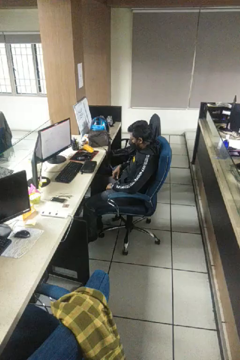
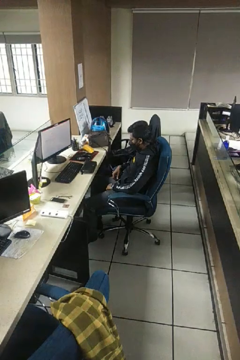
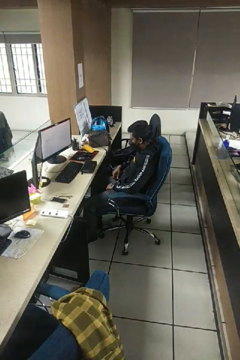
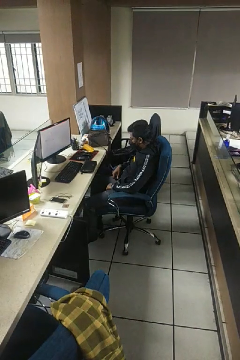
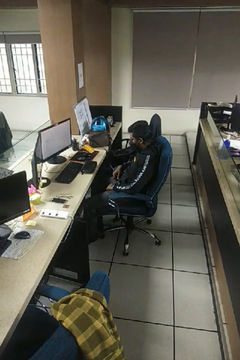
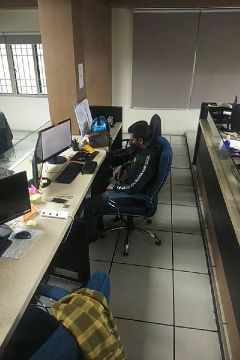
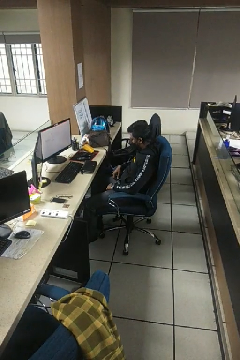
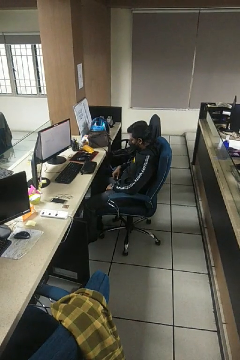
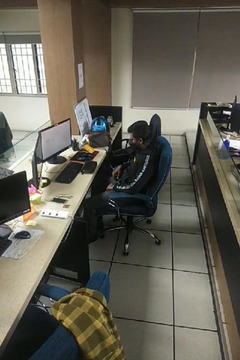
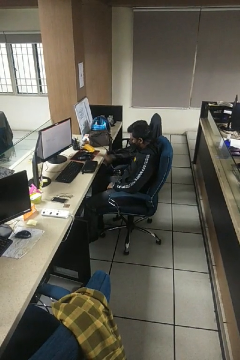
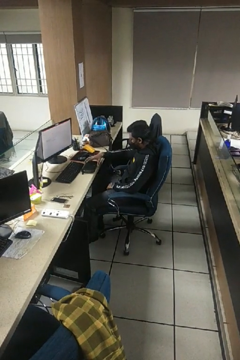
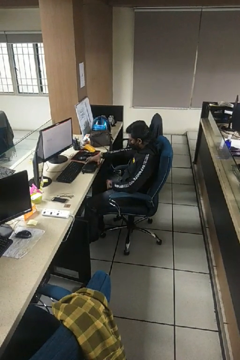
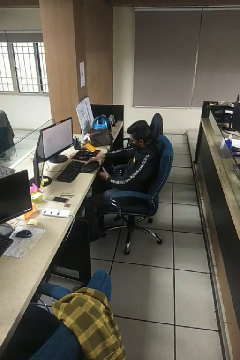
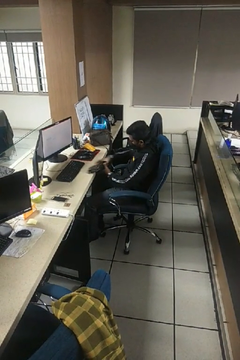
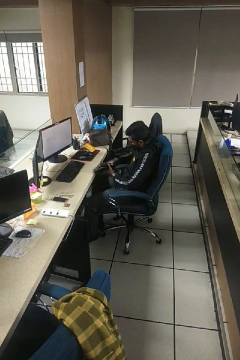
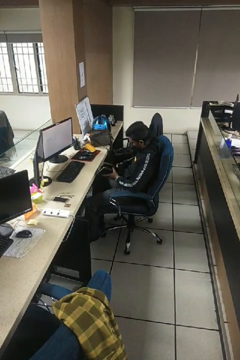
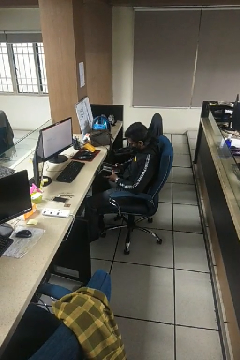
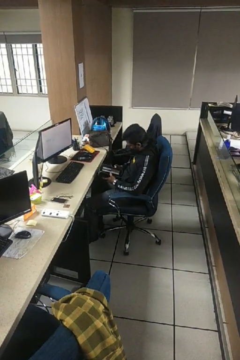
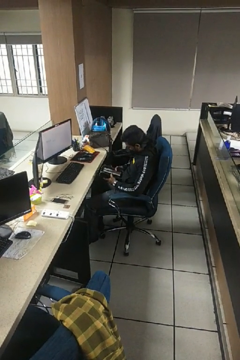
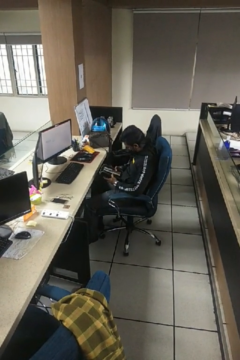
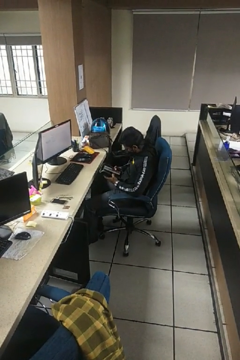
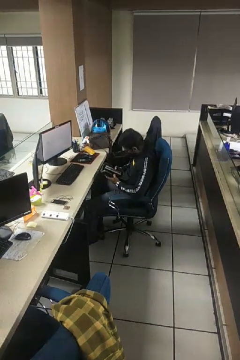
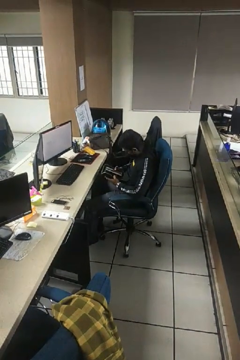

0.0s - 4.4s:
person searches in purse

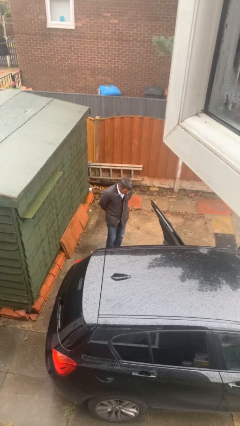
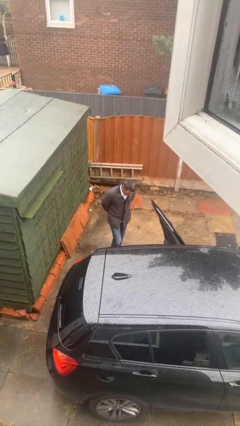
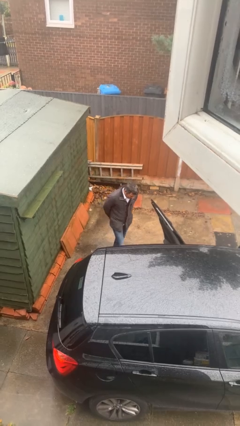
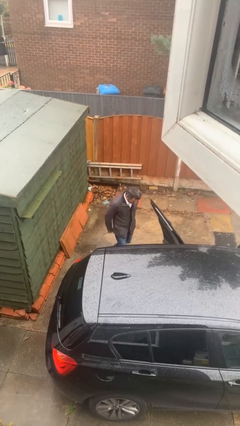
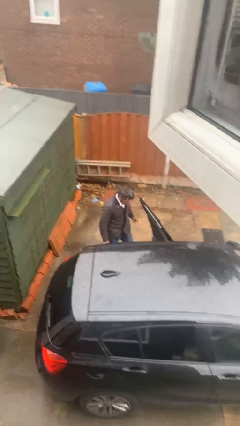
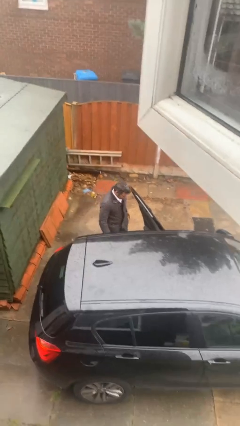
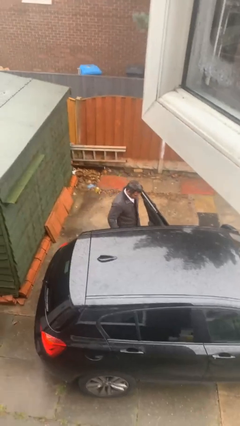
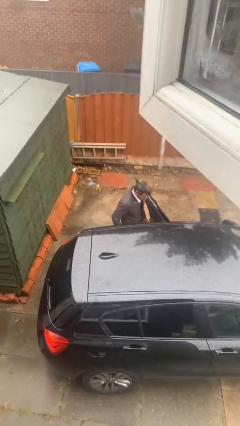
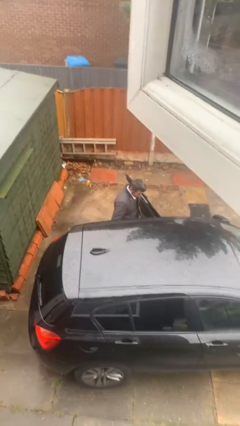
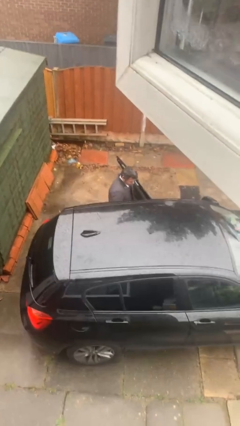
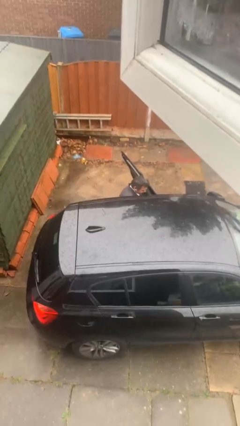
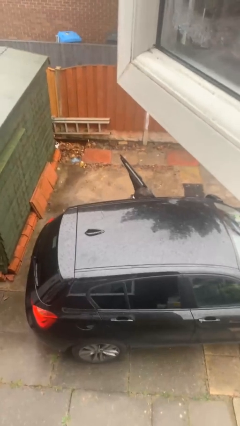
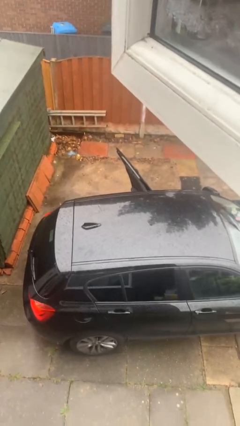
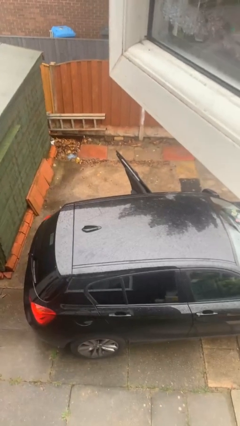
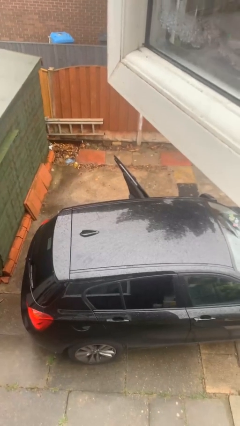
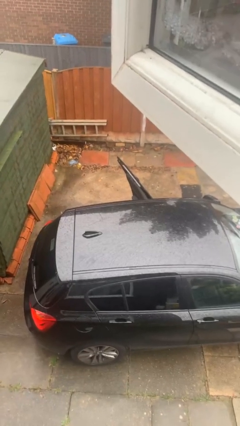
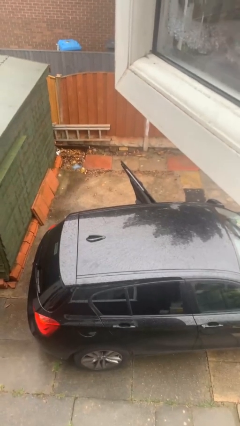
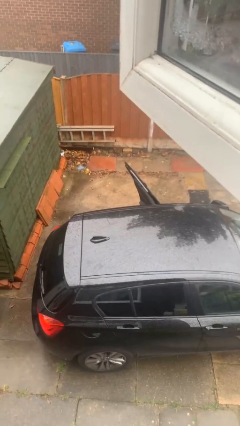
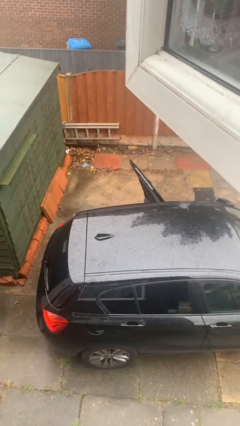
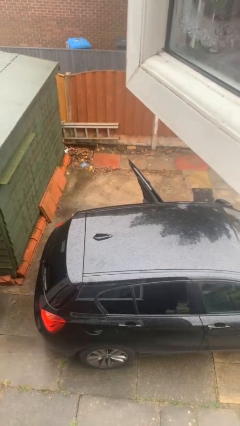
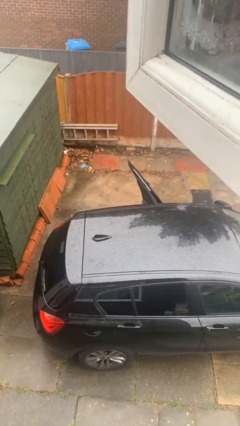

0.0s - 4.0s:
person enters car

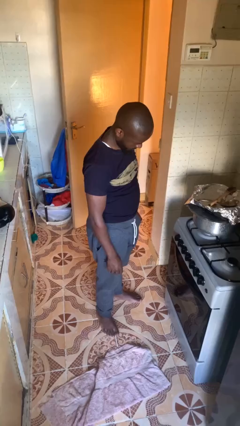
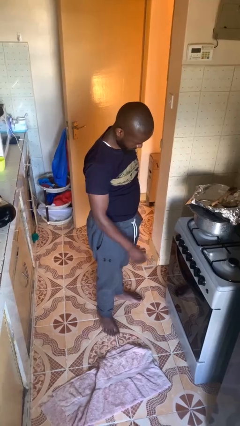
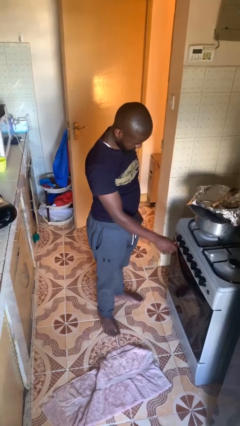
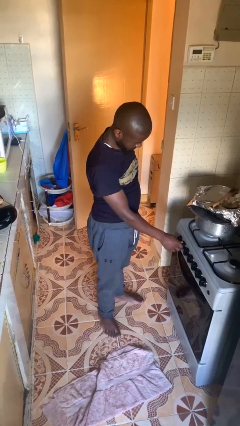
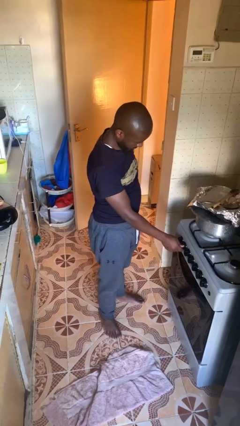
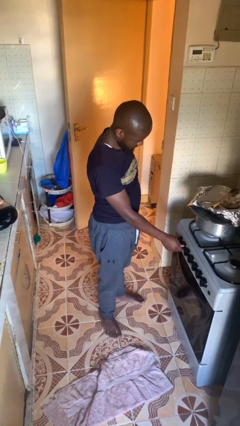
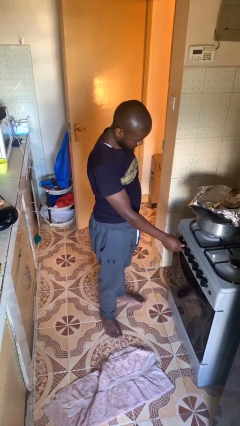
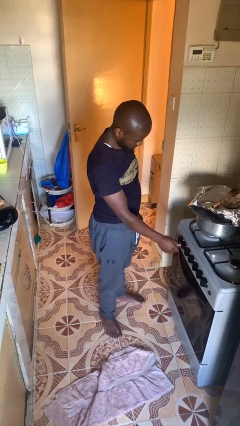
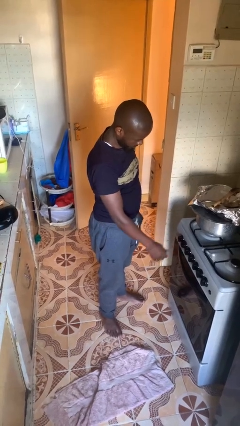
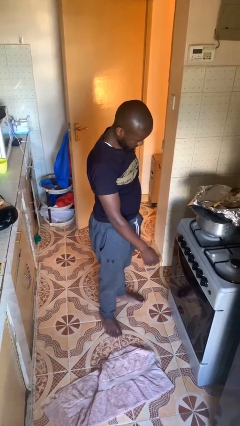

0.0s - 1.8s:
person adjusts thermostat

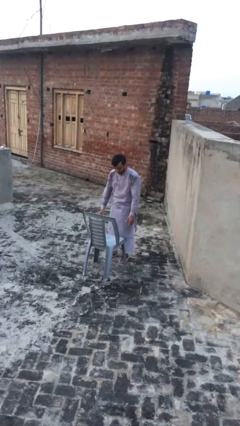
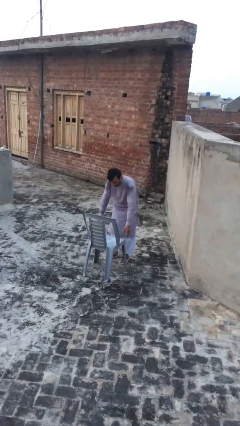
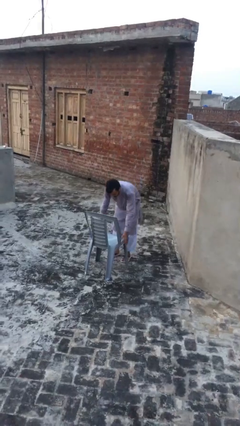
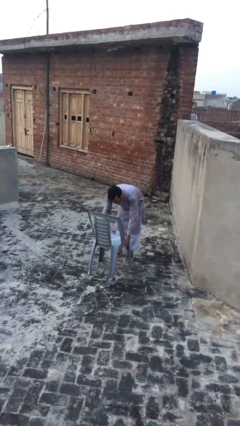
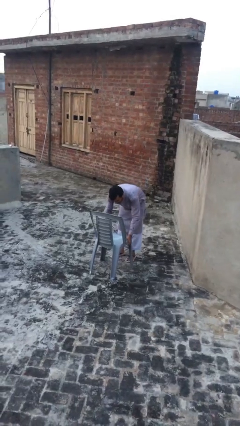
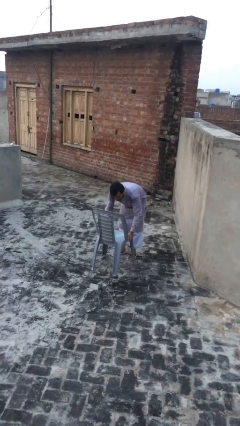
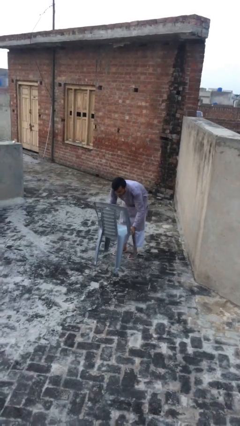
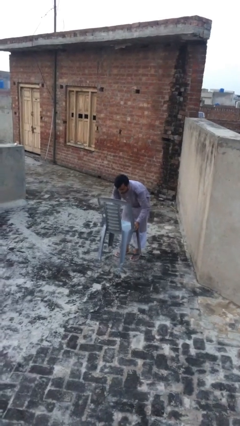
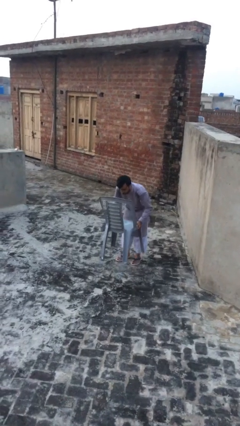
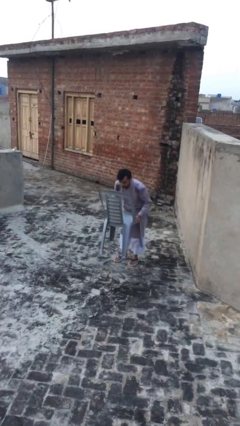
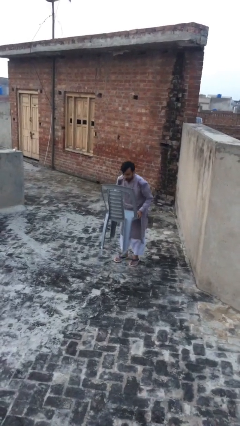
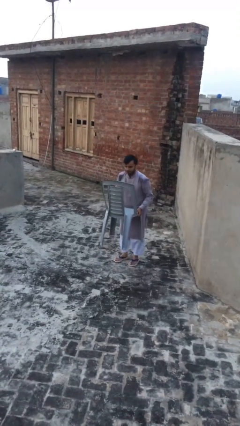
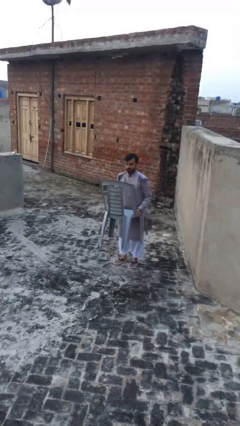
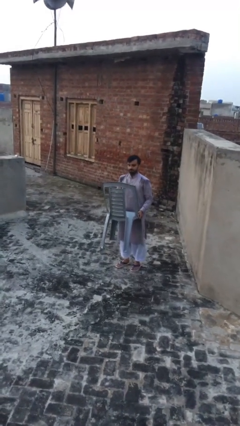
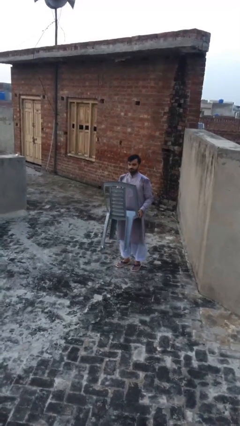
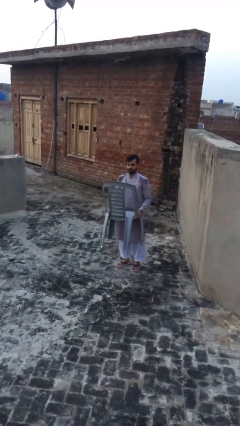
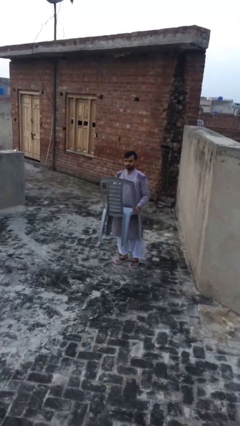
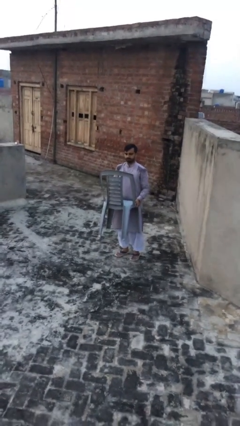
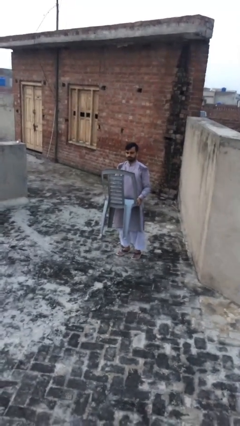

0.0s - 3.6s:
person picks up object from floor

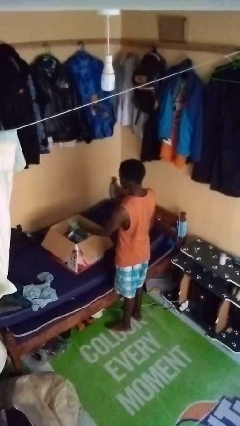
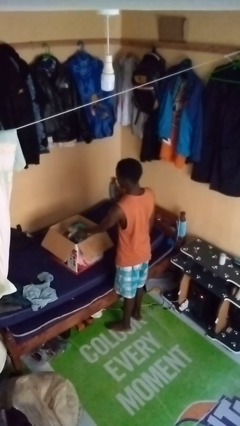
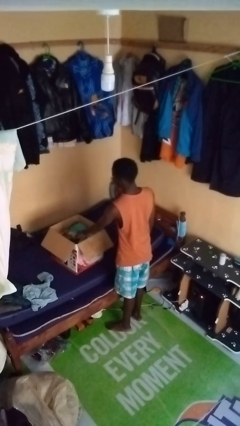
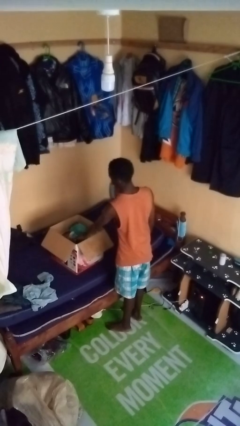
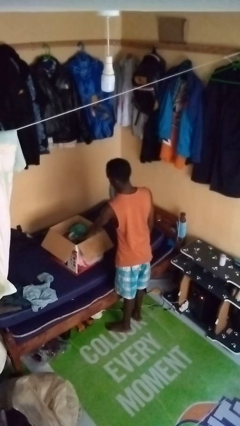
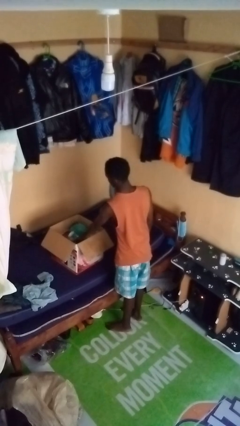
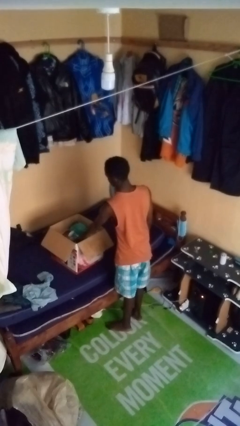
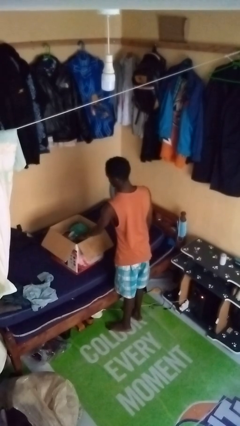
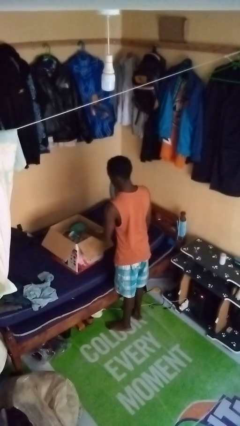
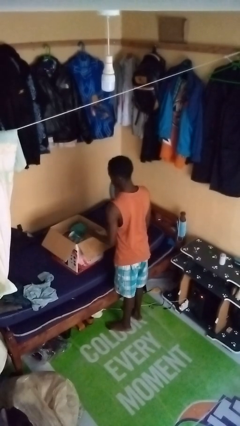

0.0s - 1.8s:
person puts object into box

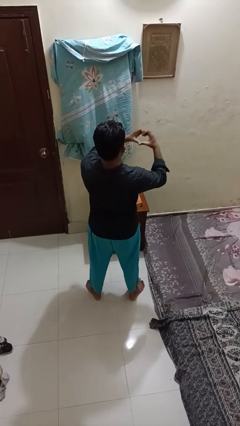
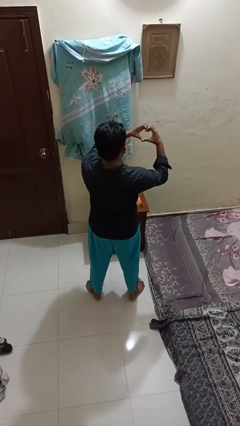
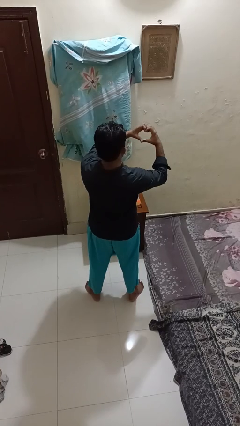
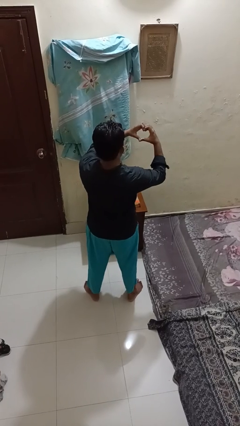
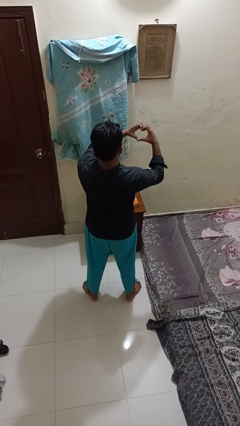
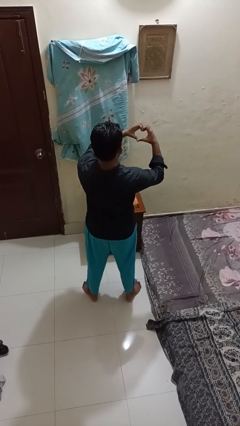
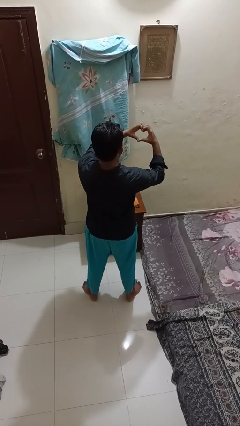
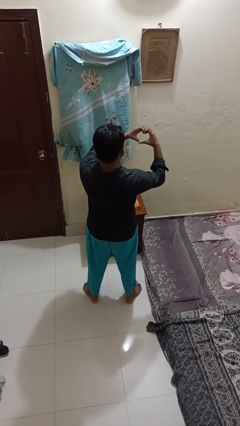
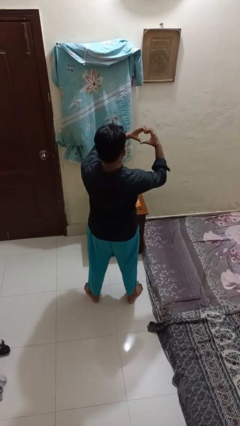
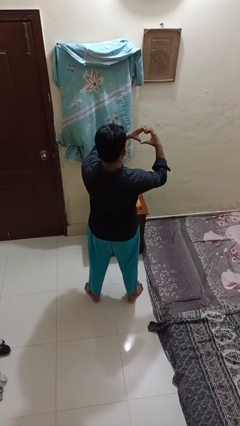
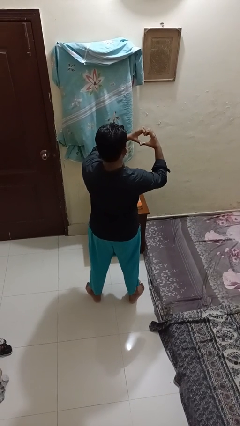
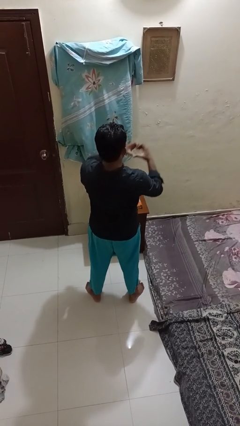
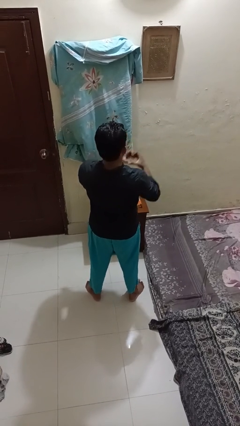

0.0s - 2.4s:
person gestures heart
